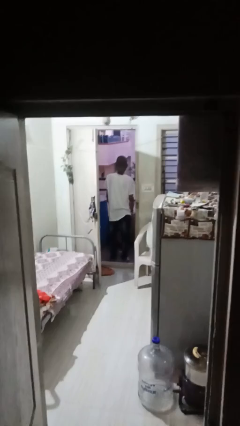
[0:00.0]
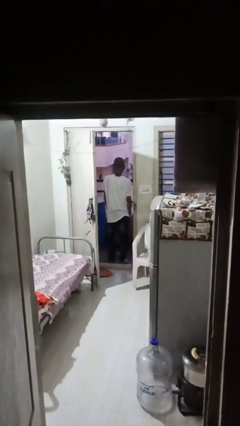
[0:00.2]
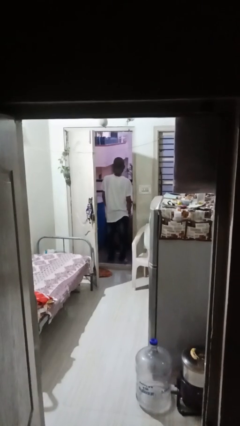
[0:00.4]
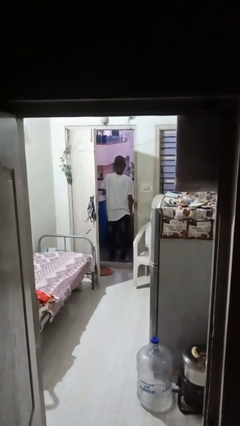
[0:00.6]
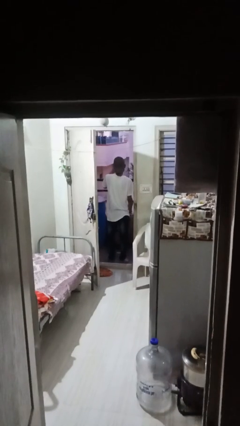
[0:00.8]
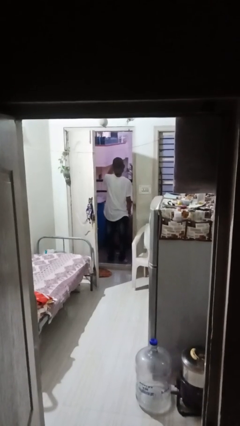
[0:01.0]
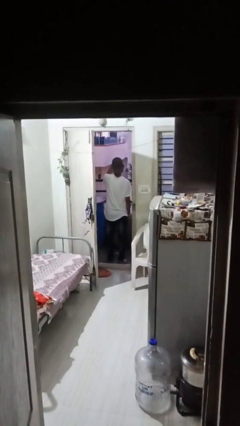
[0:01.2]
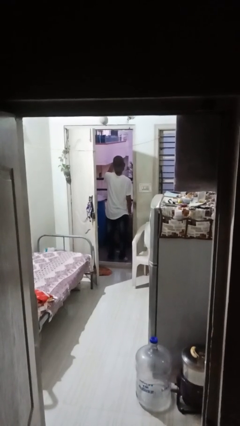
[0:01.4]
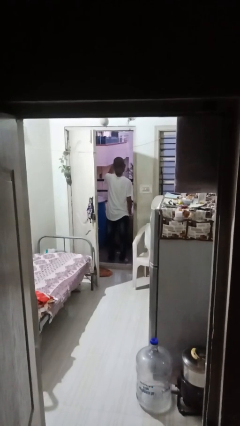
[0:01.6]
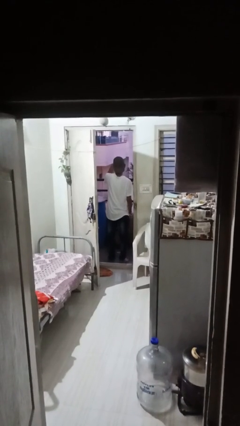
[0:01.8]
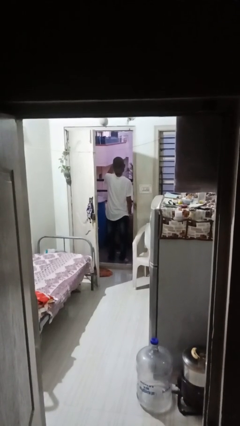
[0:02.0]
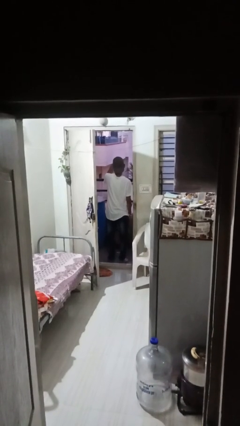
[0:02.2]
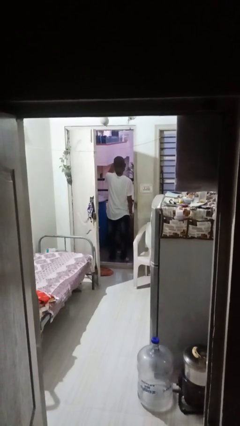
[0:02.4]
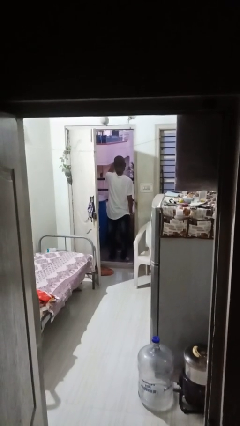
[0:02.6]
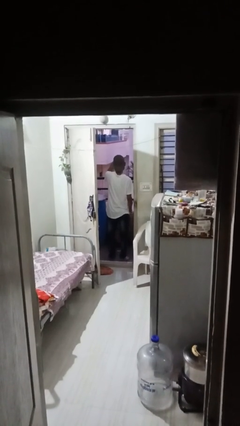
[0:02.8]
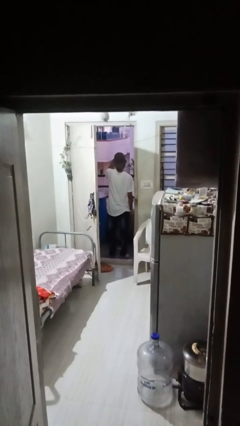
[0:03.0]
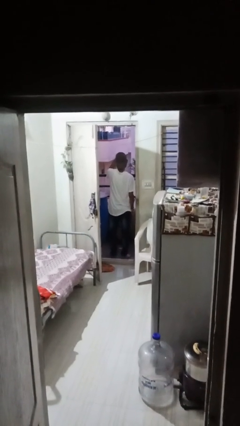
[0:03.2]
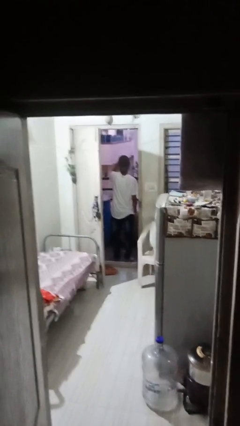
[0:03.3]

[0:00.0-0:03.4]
person shades eyes

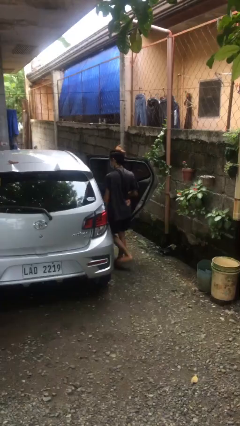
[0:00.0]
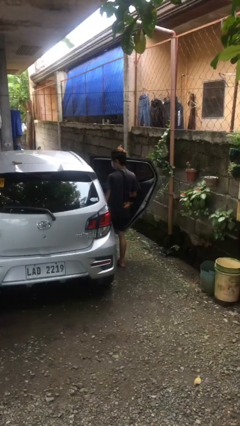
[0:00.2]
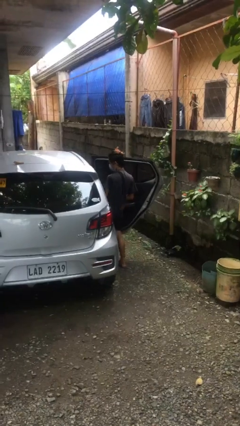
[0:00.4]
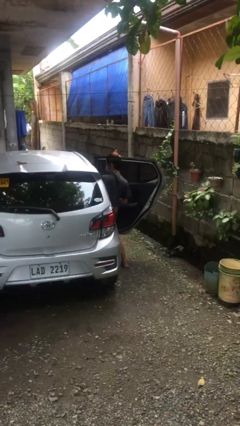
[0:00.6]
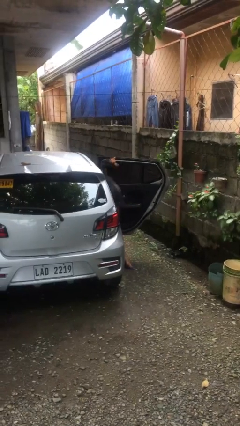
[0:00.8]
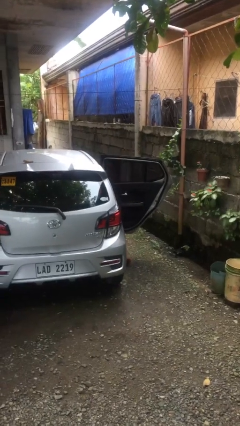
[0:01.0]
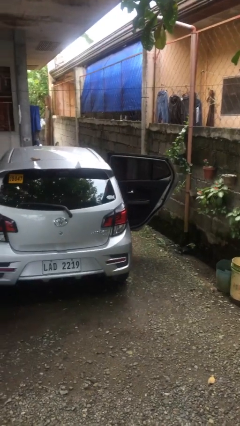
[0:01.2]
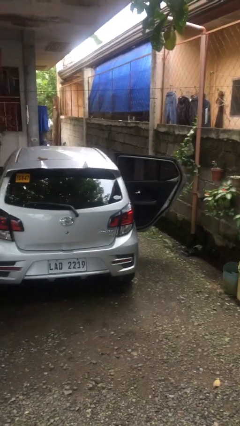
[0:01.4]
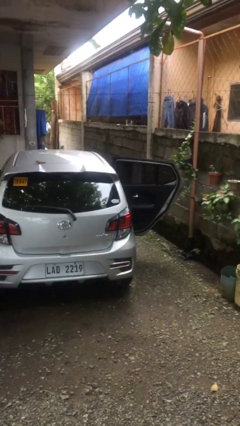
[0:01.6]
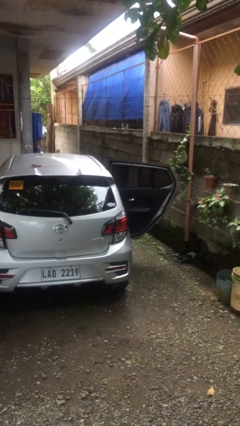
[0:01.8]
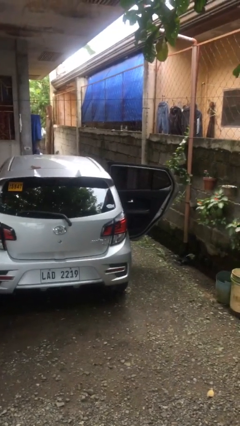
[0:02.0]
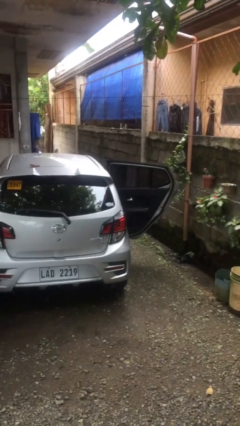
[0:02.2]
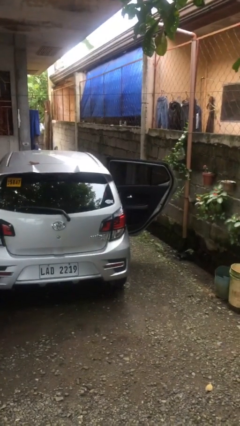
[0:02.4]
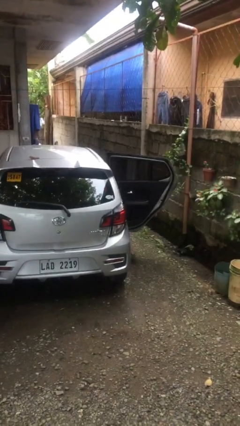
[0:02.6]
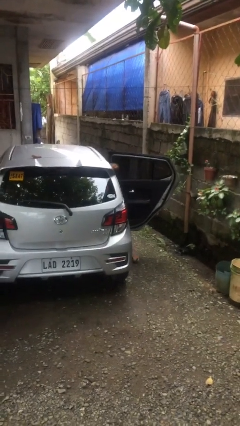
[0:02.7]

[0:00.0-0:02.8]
person enters car

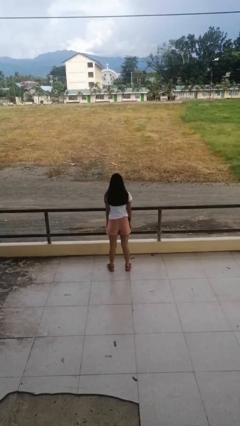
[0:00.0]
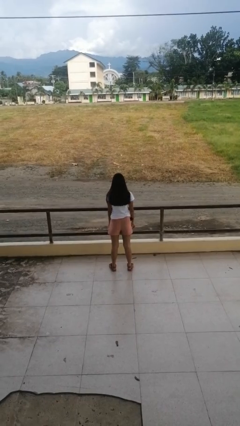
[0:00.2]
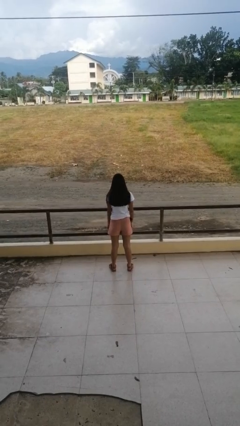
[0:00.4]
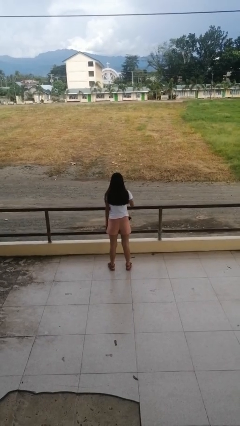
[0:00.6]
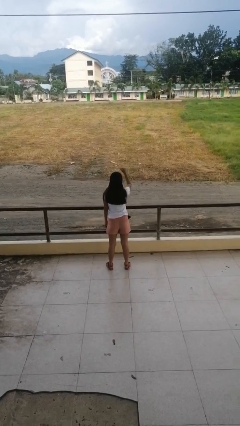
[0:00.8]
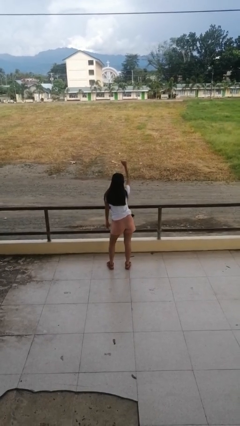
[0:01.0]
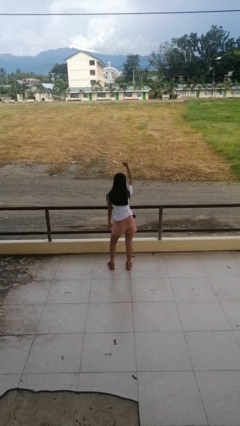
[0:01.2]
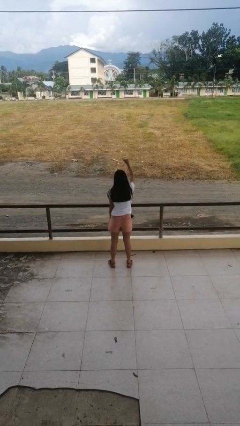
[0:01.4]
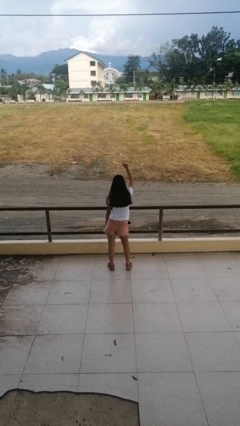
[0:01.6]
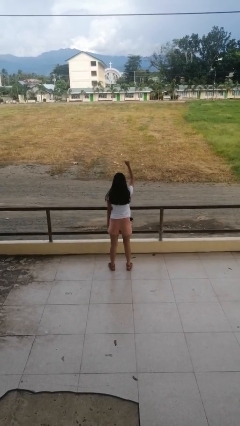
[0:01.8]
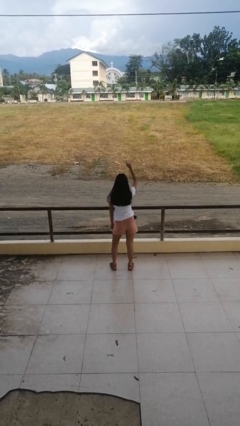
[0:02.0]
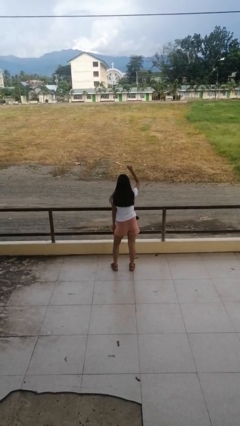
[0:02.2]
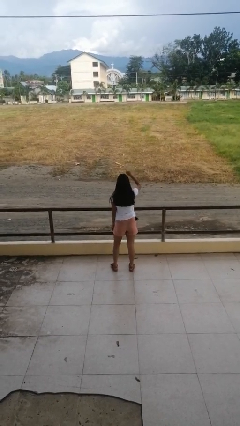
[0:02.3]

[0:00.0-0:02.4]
person dances in place

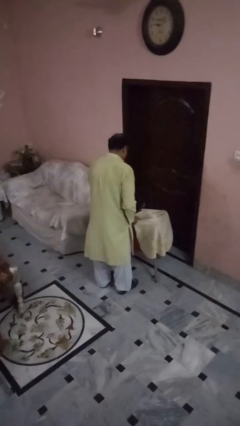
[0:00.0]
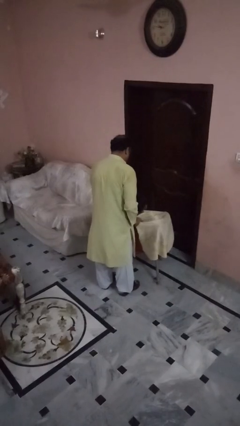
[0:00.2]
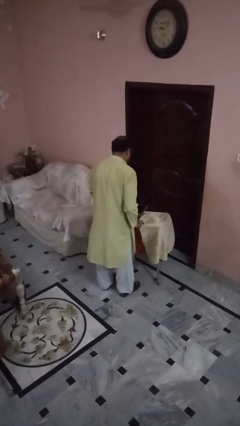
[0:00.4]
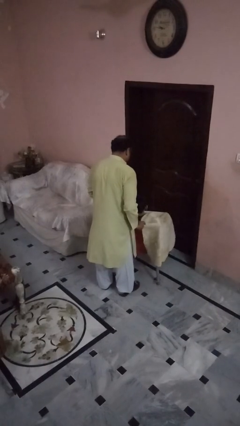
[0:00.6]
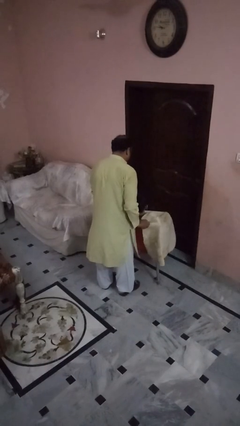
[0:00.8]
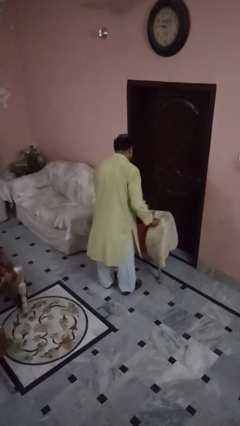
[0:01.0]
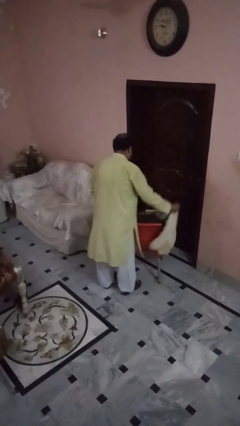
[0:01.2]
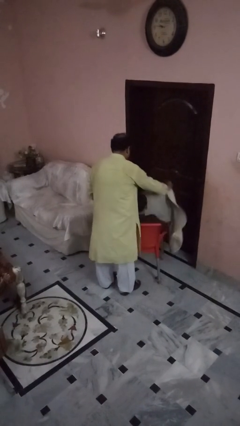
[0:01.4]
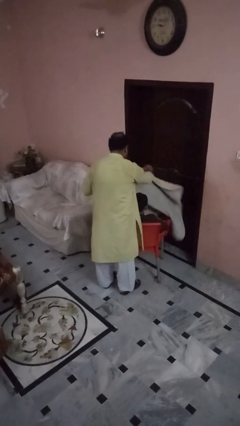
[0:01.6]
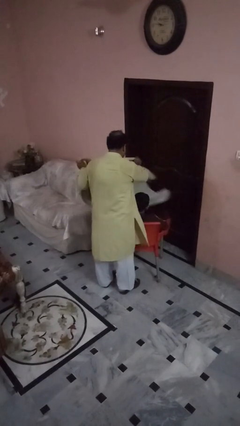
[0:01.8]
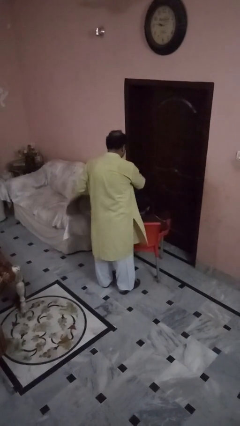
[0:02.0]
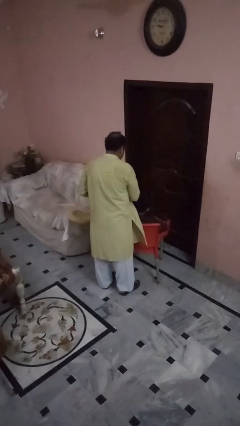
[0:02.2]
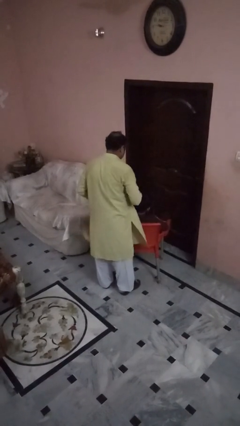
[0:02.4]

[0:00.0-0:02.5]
person uncovers friend with blanket

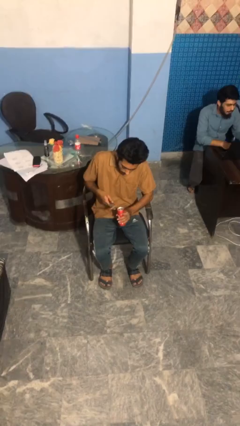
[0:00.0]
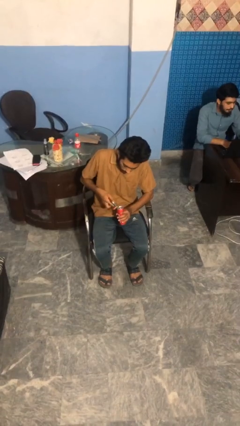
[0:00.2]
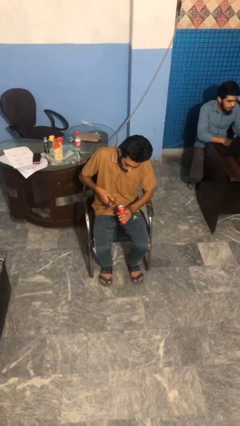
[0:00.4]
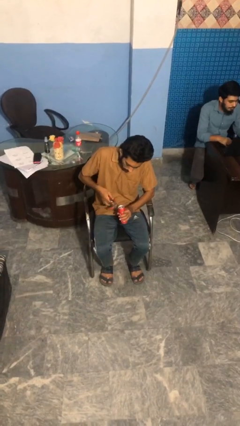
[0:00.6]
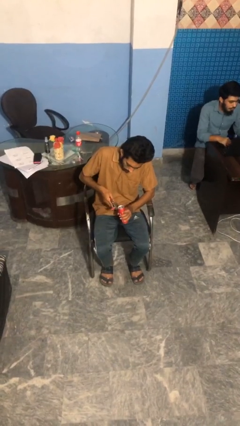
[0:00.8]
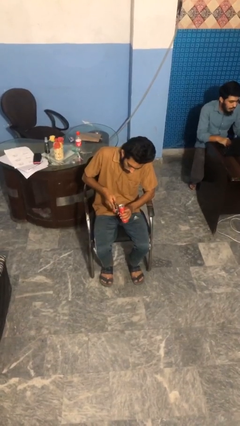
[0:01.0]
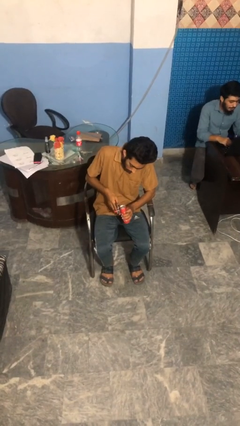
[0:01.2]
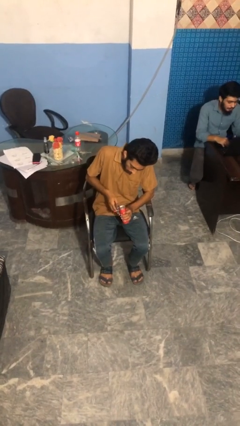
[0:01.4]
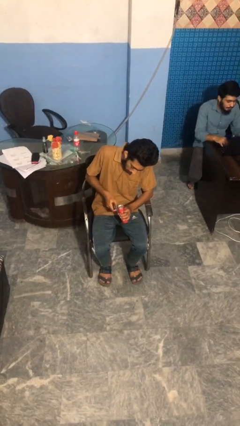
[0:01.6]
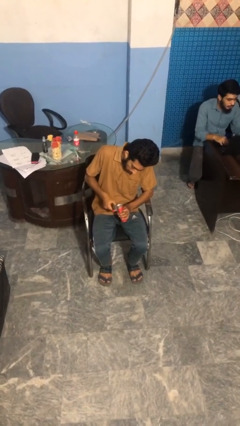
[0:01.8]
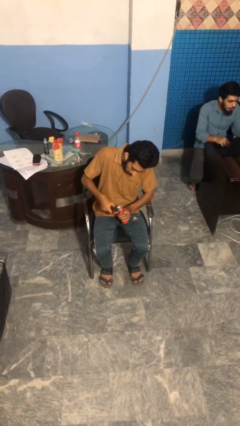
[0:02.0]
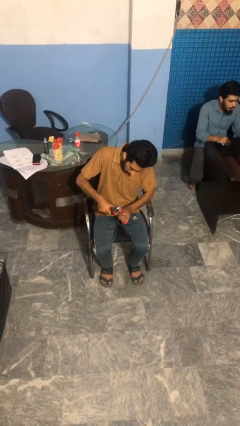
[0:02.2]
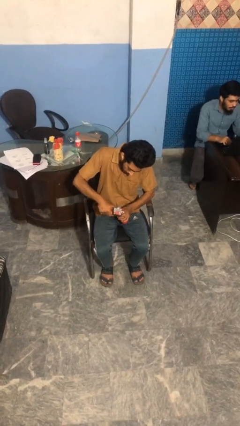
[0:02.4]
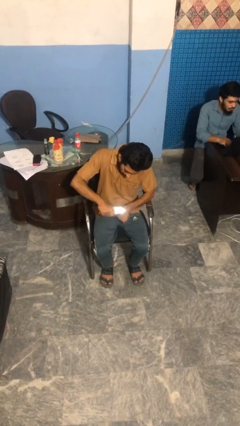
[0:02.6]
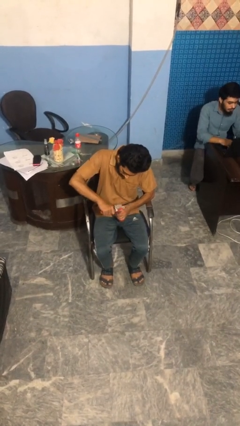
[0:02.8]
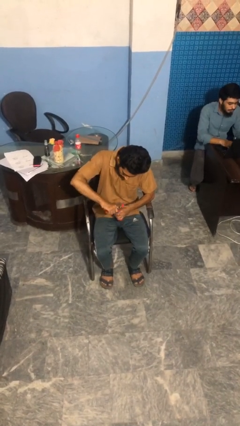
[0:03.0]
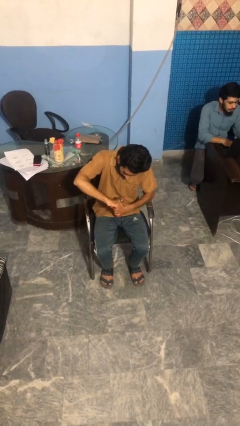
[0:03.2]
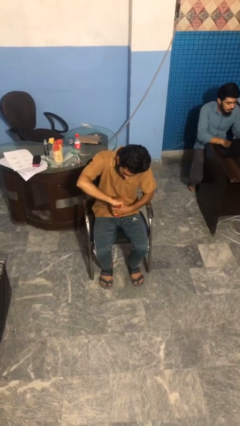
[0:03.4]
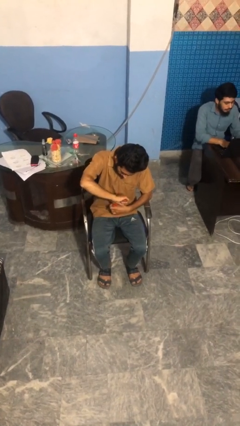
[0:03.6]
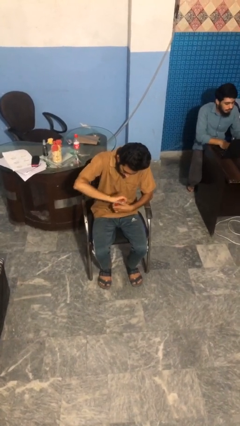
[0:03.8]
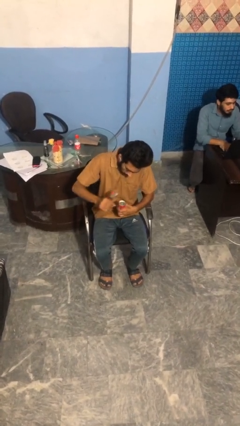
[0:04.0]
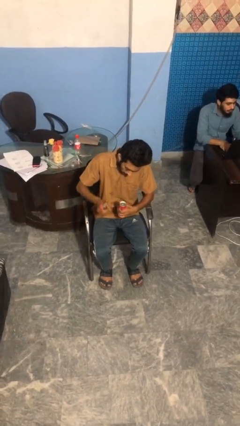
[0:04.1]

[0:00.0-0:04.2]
person opens can with can opener

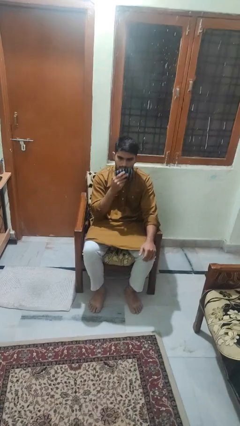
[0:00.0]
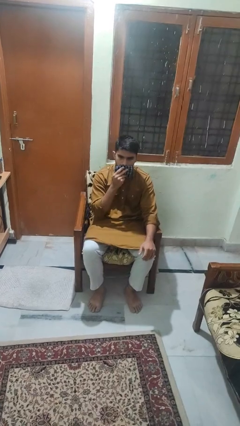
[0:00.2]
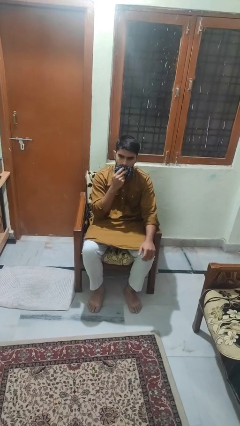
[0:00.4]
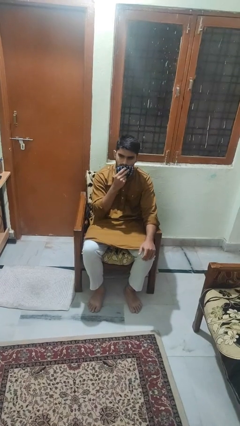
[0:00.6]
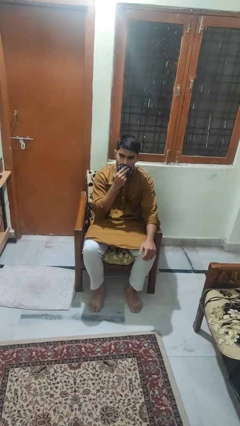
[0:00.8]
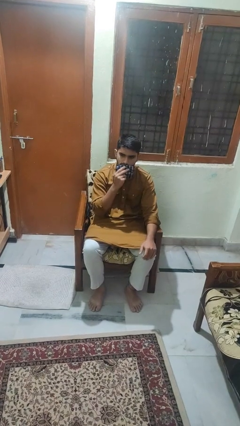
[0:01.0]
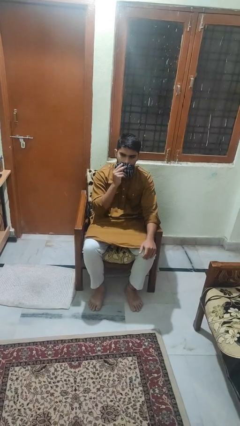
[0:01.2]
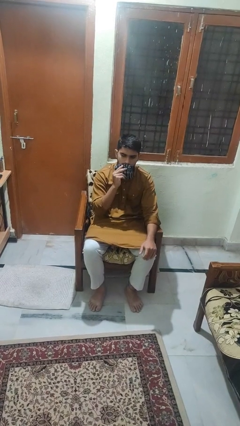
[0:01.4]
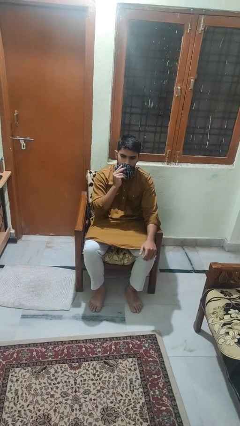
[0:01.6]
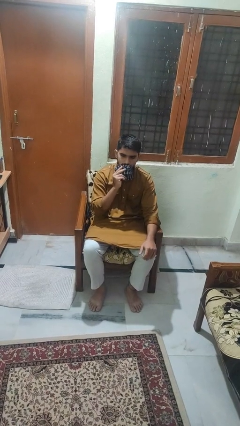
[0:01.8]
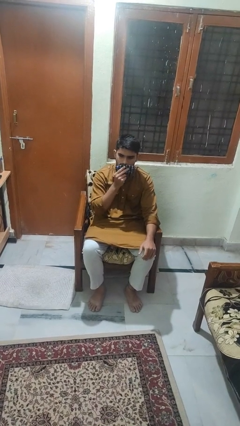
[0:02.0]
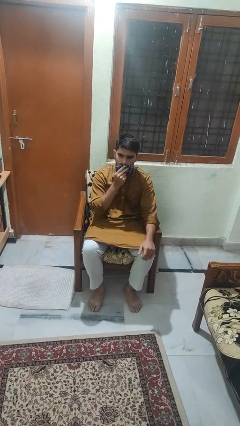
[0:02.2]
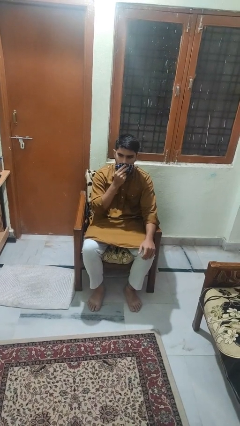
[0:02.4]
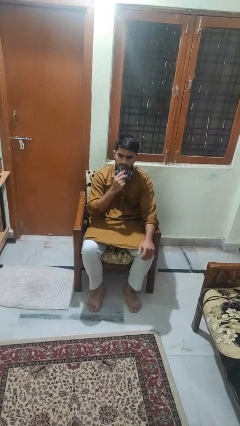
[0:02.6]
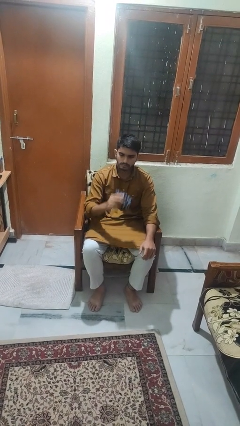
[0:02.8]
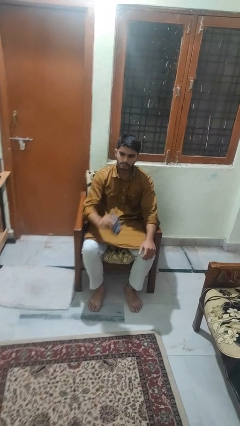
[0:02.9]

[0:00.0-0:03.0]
person wipes mouth with napkin
